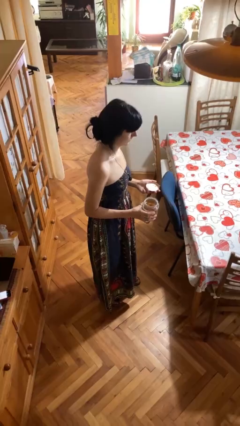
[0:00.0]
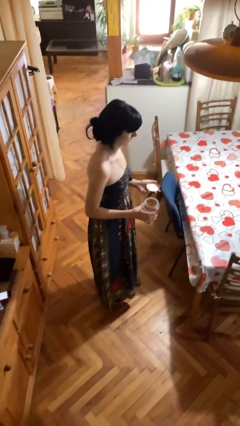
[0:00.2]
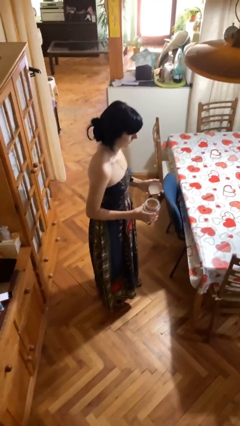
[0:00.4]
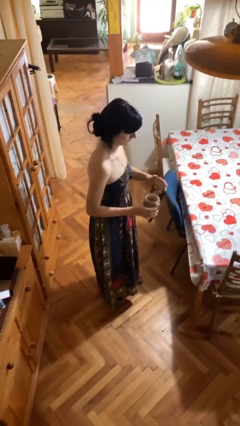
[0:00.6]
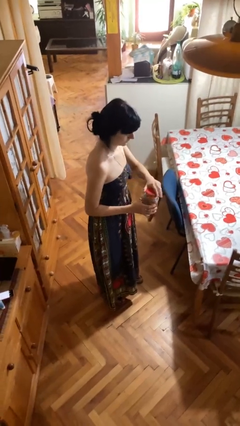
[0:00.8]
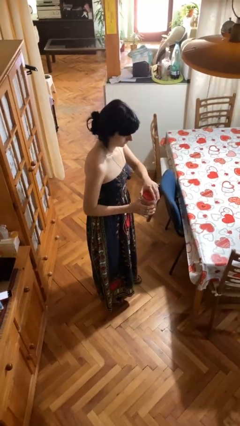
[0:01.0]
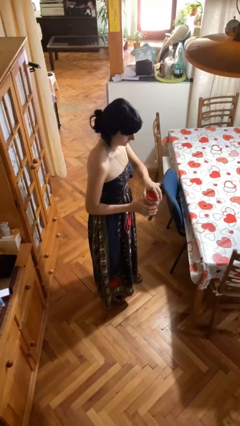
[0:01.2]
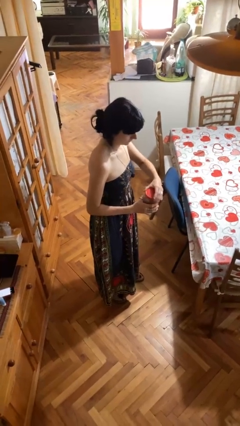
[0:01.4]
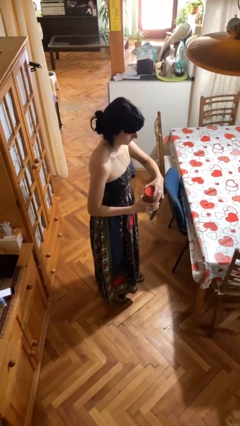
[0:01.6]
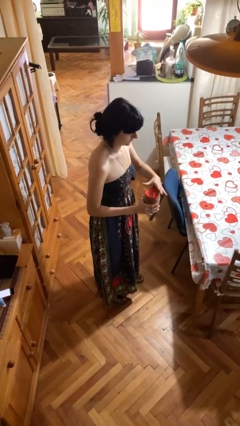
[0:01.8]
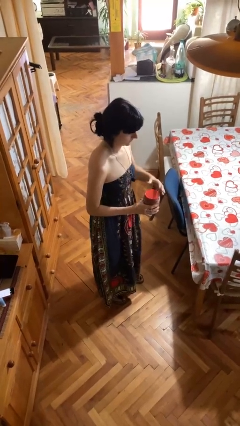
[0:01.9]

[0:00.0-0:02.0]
person closes jar

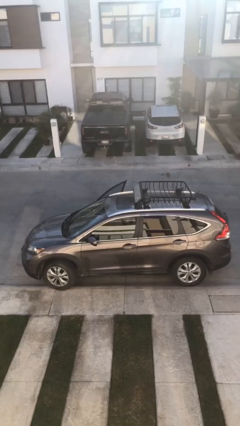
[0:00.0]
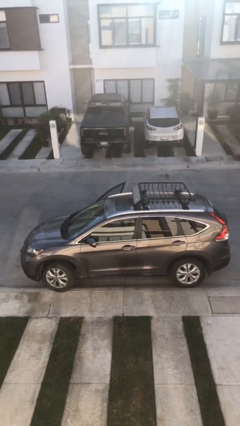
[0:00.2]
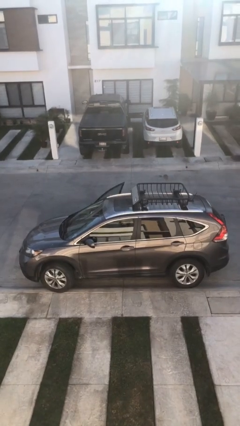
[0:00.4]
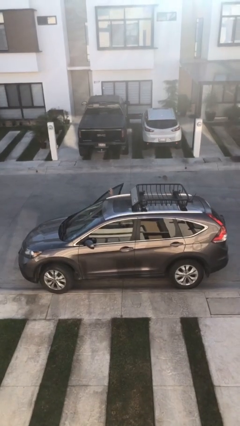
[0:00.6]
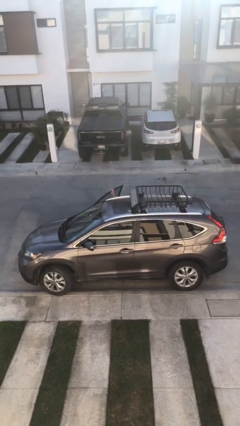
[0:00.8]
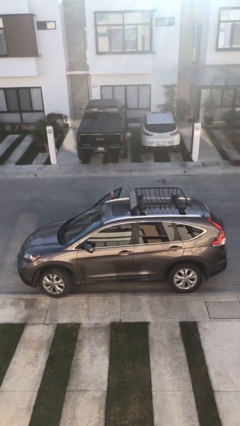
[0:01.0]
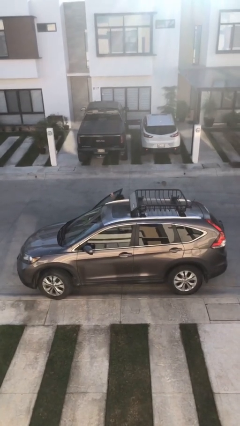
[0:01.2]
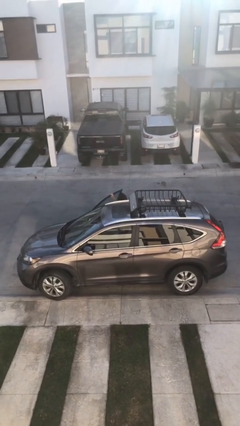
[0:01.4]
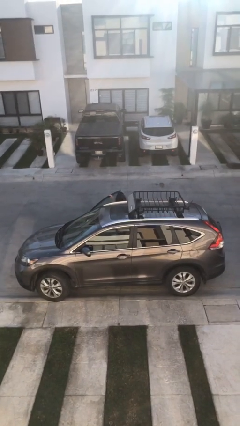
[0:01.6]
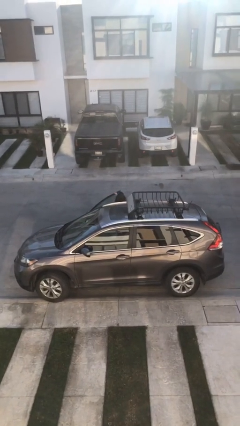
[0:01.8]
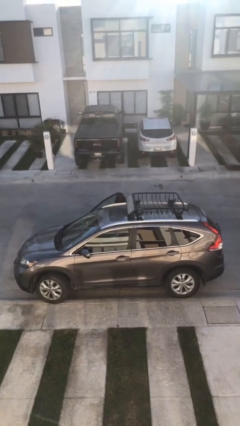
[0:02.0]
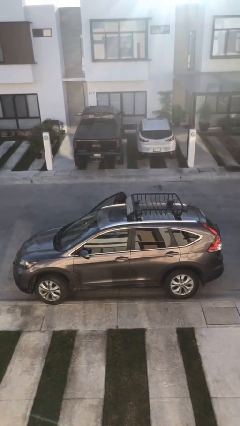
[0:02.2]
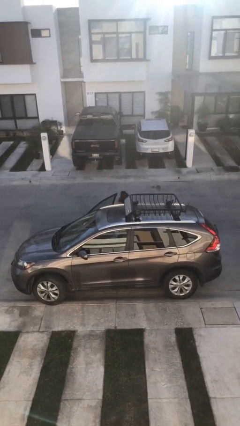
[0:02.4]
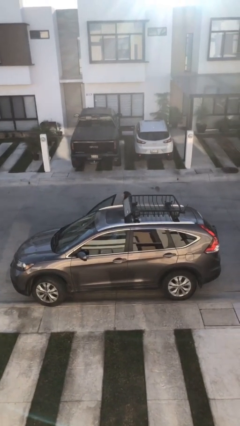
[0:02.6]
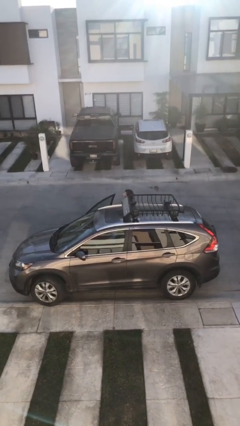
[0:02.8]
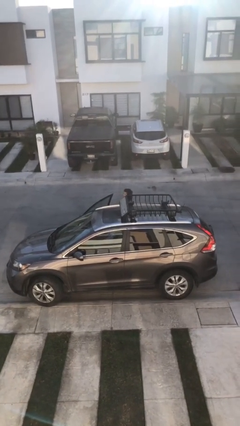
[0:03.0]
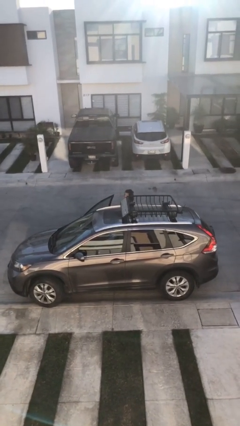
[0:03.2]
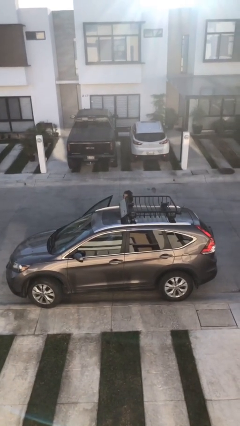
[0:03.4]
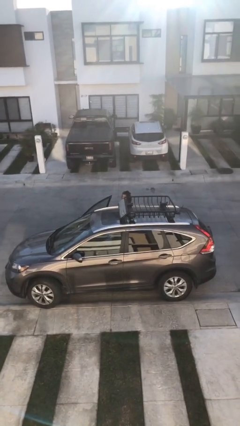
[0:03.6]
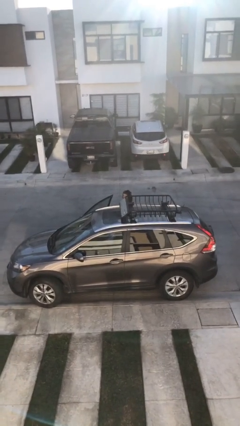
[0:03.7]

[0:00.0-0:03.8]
person exits car

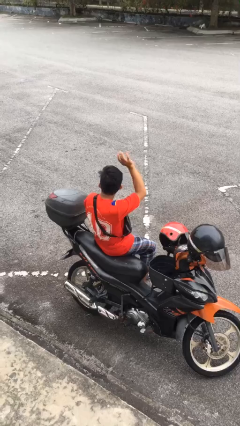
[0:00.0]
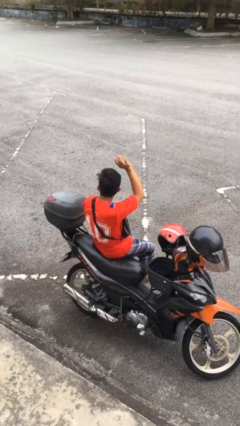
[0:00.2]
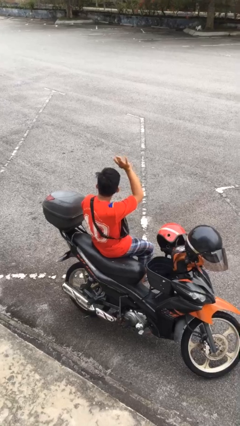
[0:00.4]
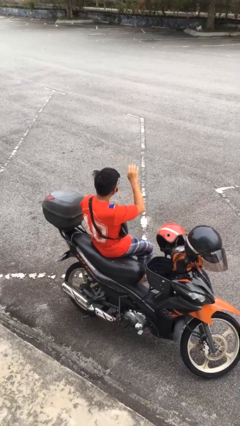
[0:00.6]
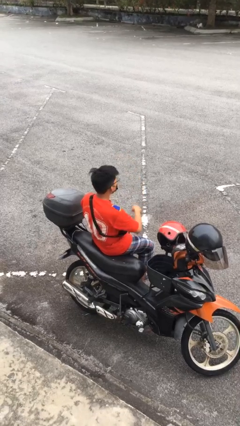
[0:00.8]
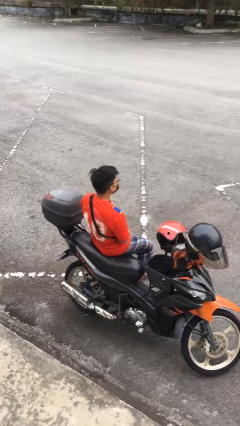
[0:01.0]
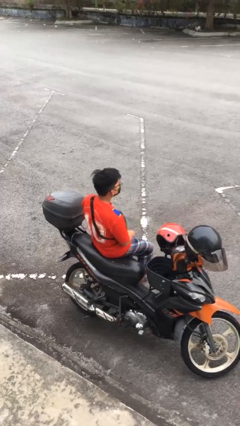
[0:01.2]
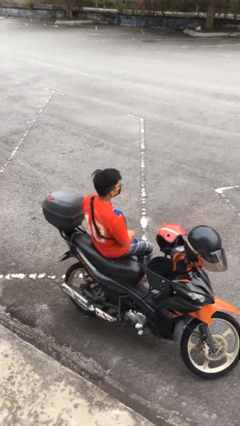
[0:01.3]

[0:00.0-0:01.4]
person gestures lower hand

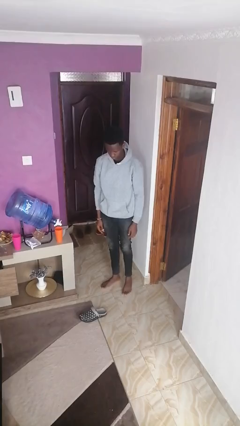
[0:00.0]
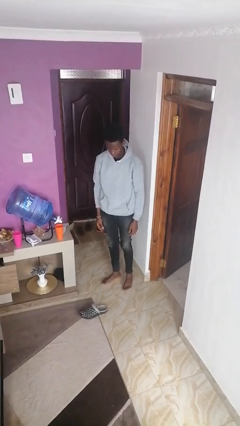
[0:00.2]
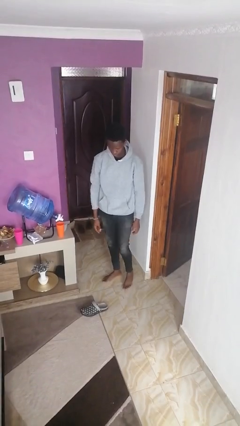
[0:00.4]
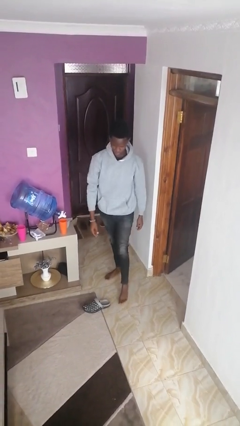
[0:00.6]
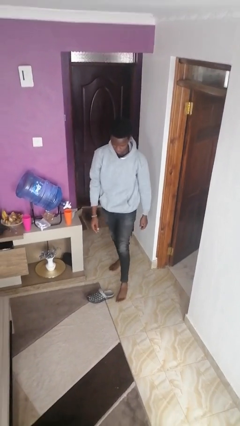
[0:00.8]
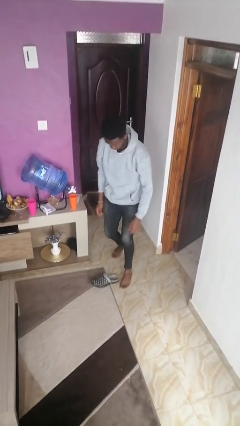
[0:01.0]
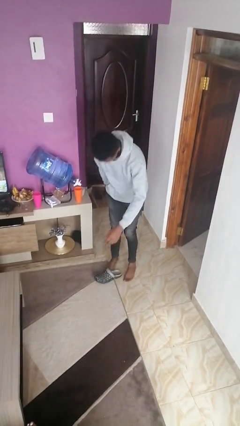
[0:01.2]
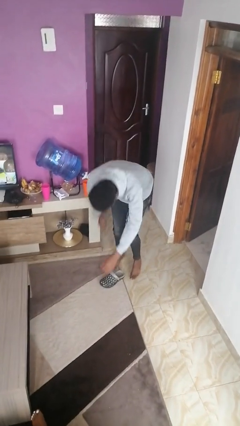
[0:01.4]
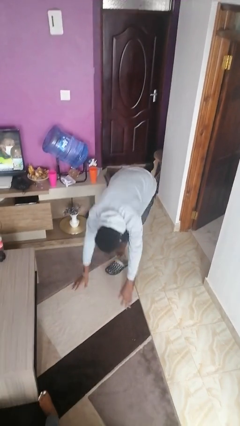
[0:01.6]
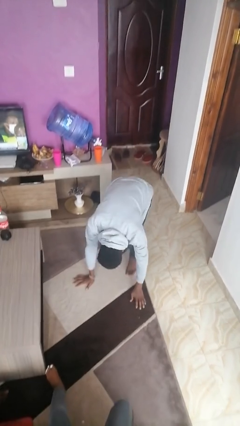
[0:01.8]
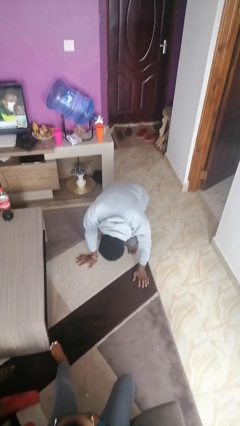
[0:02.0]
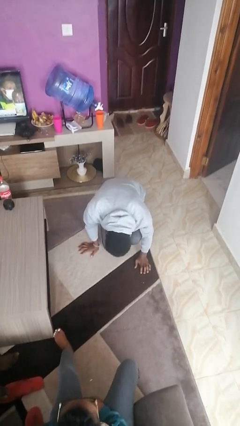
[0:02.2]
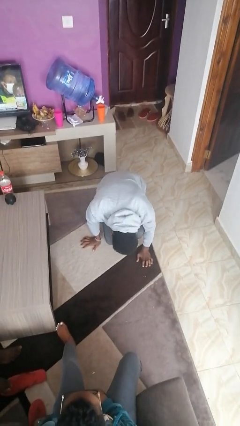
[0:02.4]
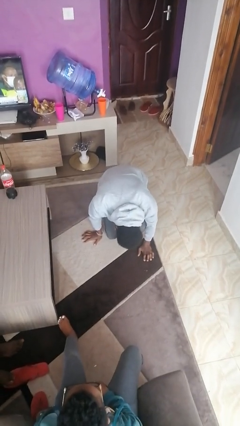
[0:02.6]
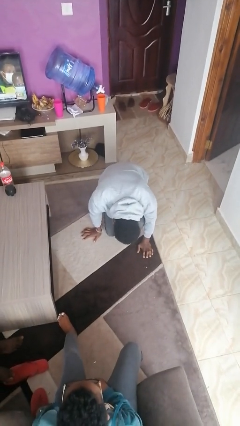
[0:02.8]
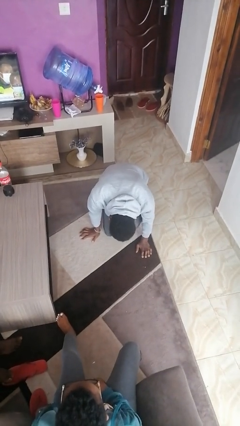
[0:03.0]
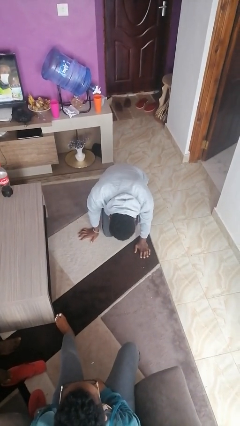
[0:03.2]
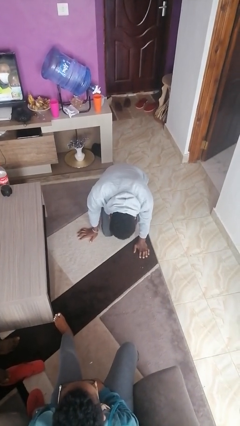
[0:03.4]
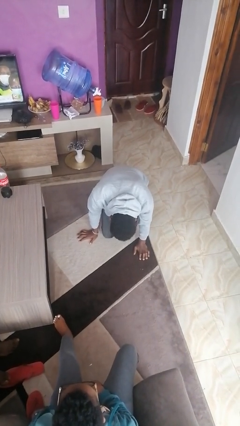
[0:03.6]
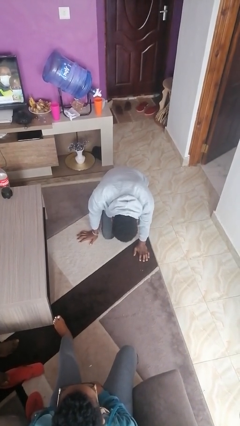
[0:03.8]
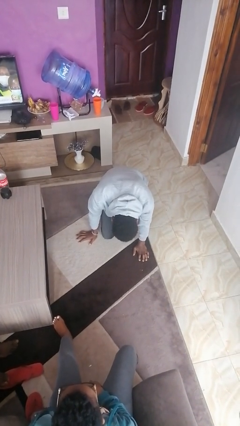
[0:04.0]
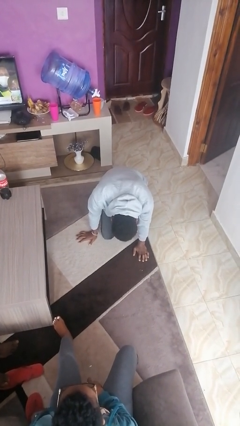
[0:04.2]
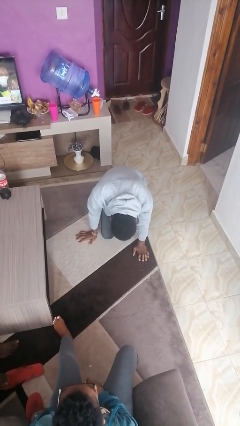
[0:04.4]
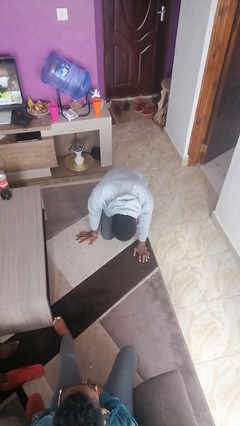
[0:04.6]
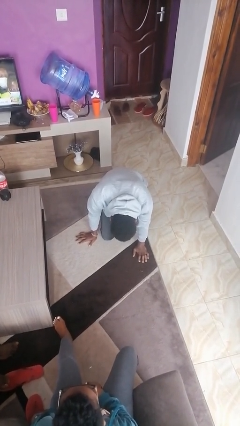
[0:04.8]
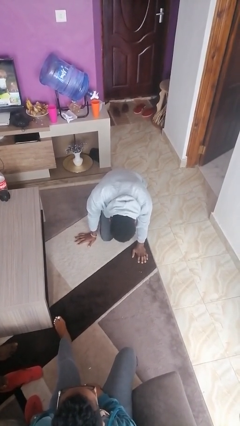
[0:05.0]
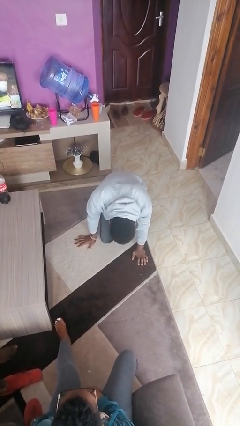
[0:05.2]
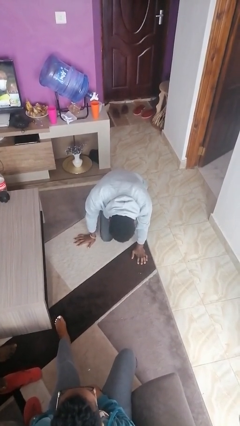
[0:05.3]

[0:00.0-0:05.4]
person trips on object on floor

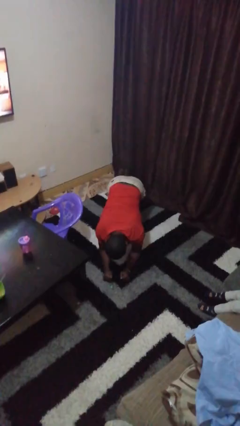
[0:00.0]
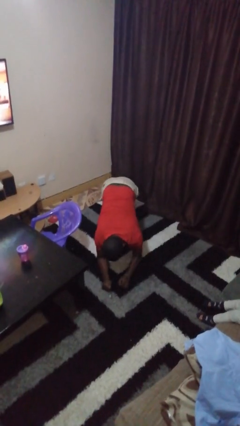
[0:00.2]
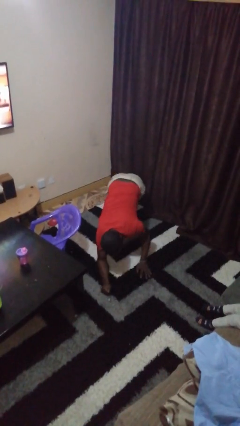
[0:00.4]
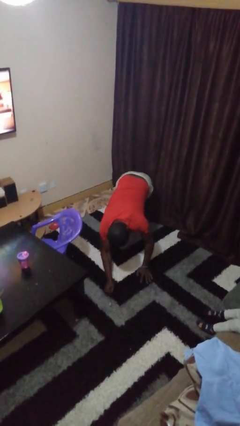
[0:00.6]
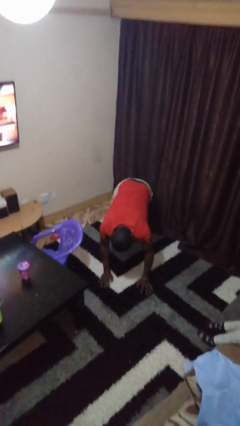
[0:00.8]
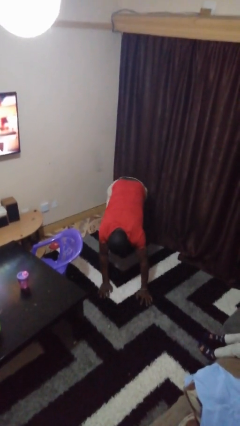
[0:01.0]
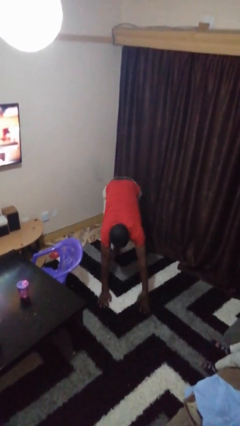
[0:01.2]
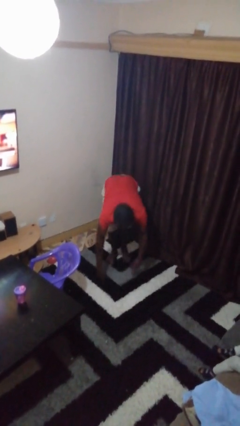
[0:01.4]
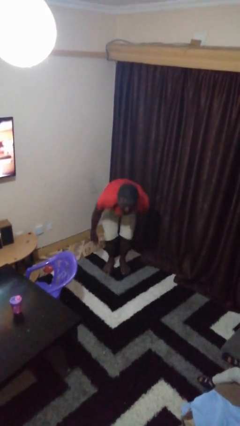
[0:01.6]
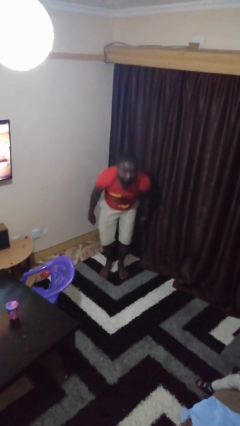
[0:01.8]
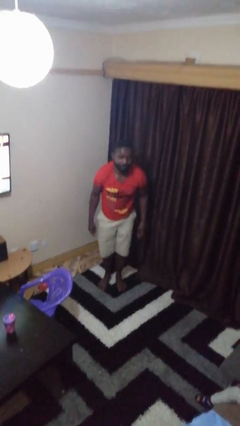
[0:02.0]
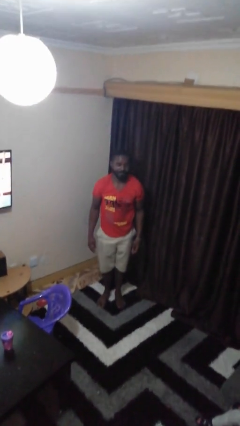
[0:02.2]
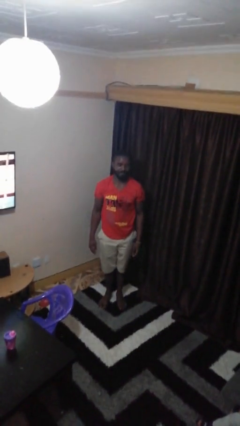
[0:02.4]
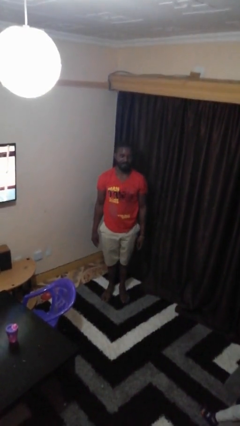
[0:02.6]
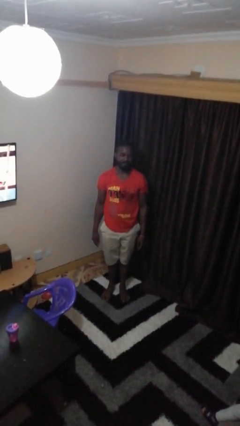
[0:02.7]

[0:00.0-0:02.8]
person stands up from floor

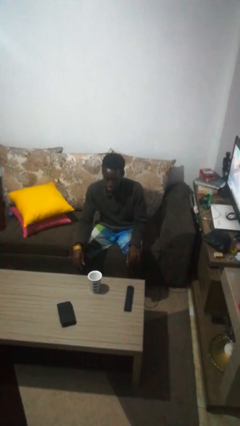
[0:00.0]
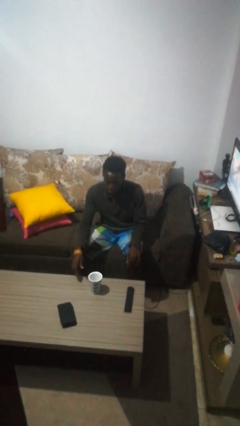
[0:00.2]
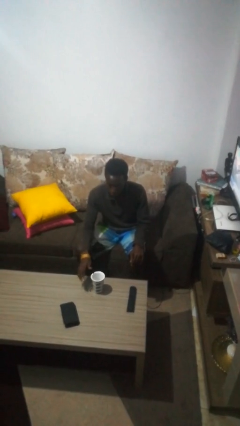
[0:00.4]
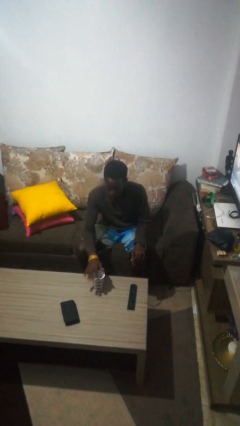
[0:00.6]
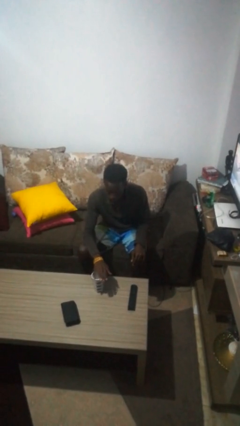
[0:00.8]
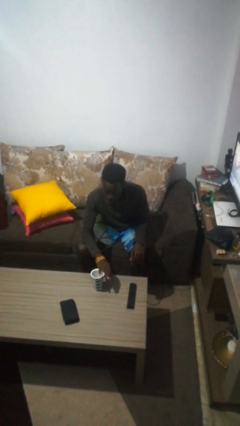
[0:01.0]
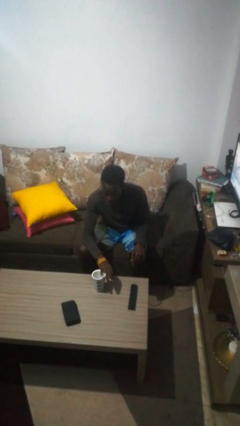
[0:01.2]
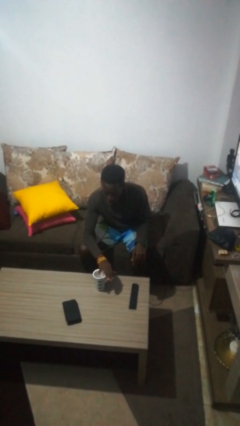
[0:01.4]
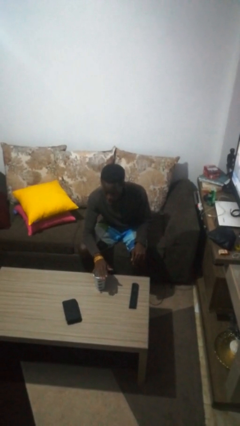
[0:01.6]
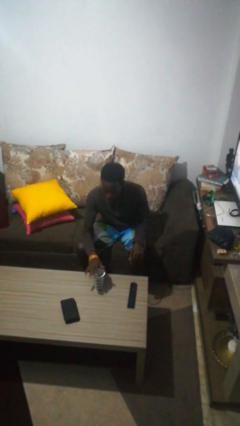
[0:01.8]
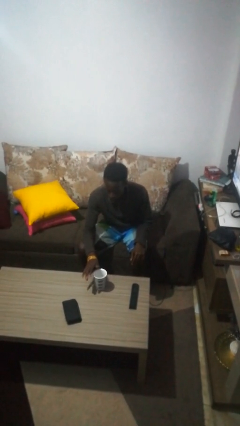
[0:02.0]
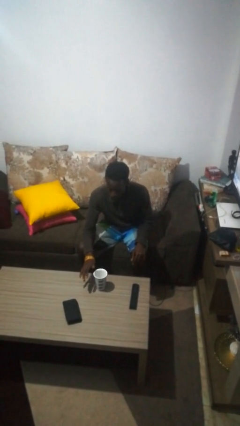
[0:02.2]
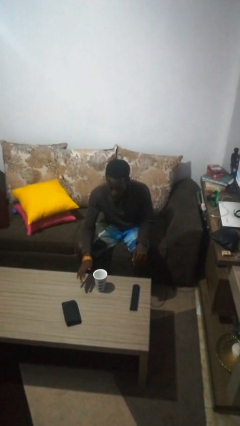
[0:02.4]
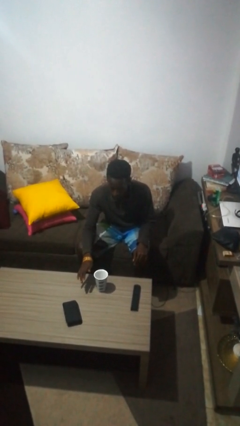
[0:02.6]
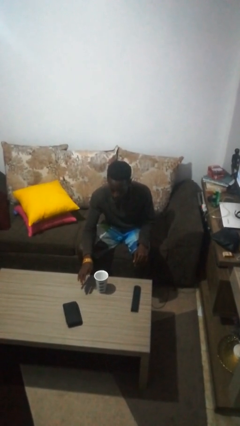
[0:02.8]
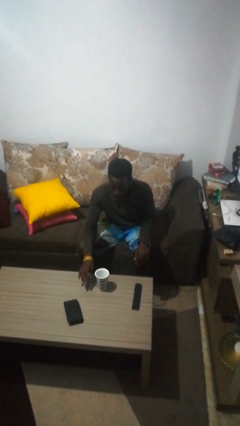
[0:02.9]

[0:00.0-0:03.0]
person waves hand over object
